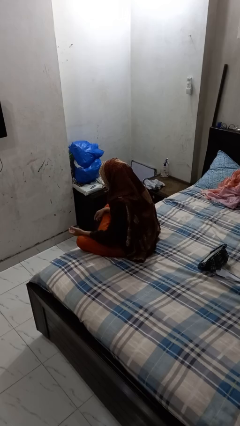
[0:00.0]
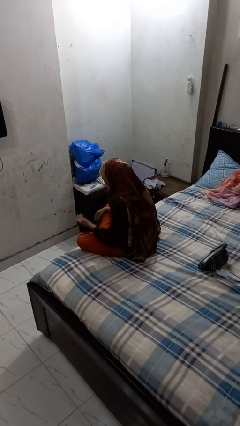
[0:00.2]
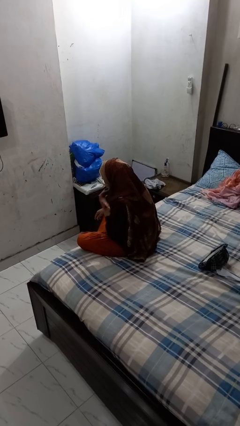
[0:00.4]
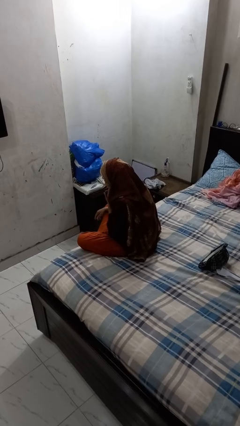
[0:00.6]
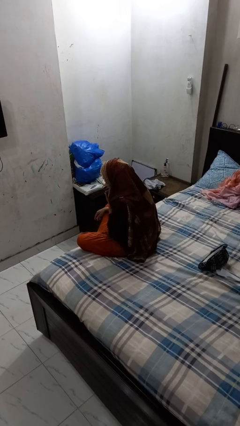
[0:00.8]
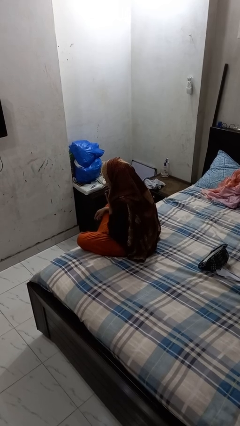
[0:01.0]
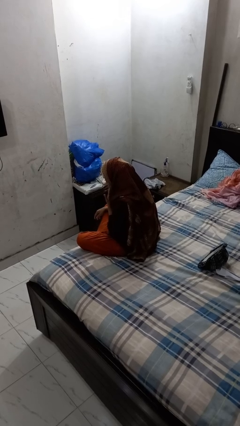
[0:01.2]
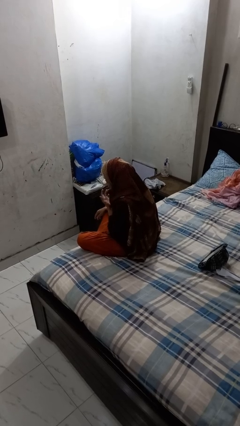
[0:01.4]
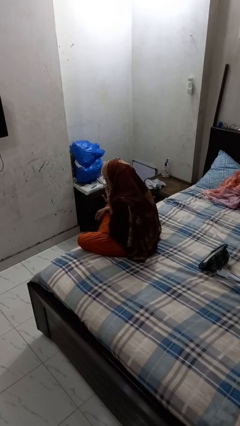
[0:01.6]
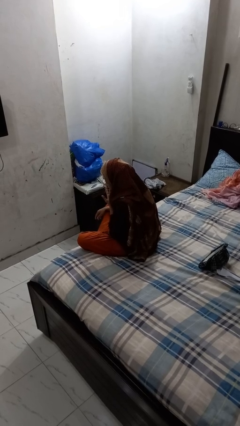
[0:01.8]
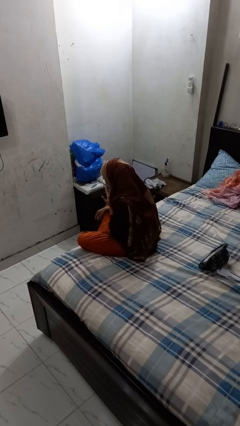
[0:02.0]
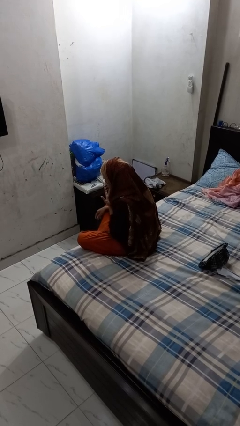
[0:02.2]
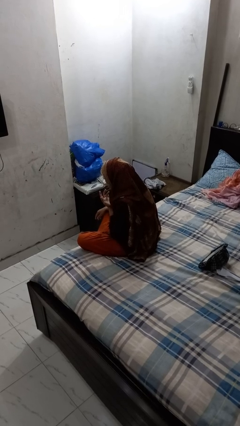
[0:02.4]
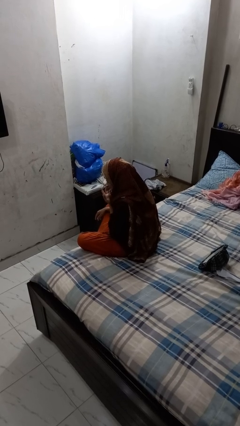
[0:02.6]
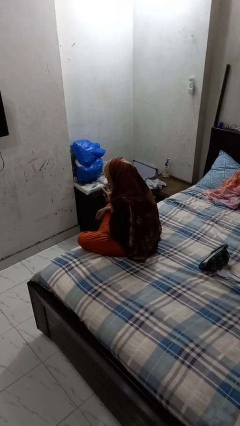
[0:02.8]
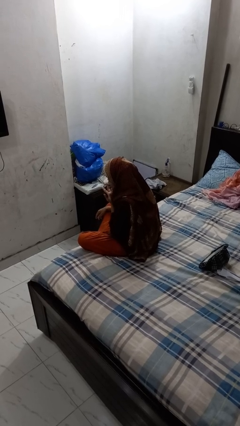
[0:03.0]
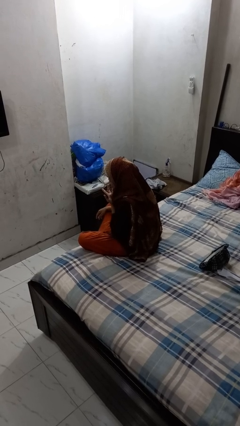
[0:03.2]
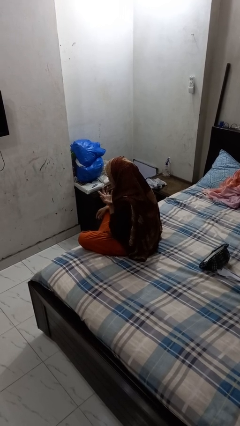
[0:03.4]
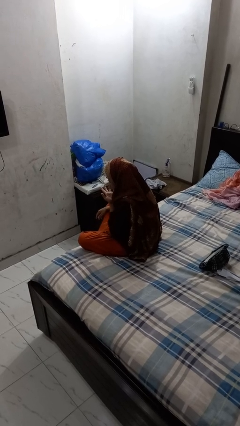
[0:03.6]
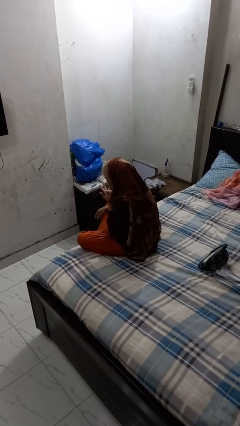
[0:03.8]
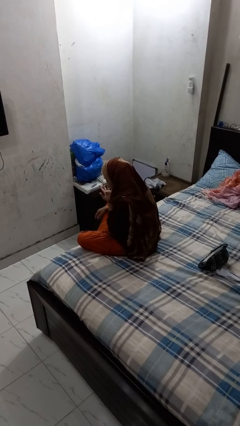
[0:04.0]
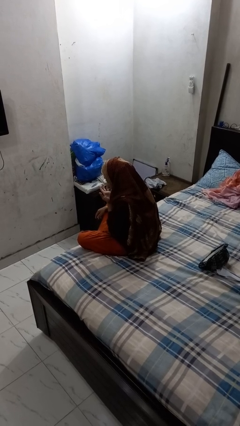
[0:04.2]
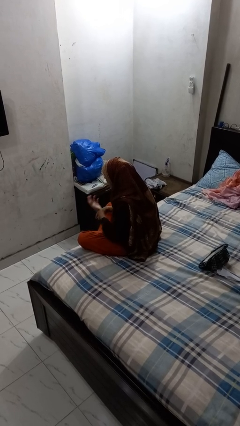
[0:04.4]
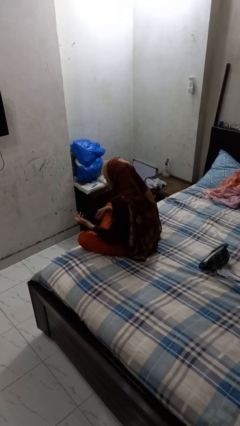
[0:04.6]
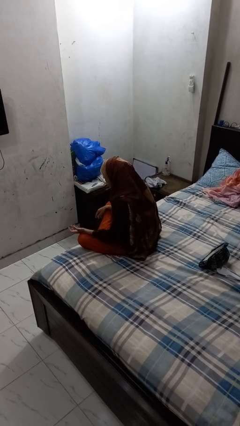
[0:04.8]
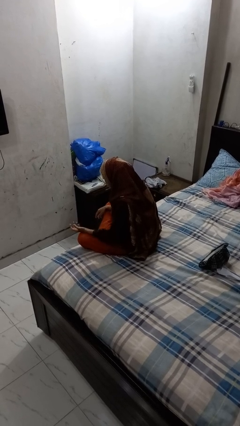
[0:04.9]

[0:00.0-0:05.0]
person licks fingers

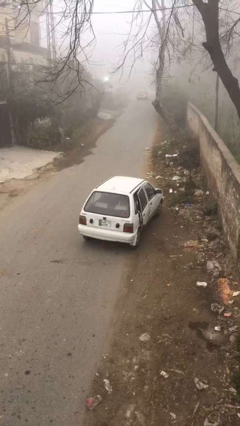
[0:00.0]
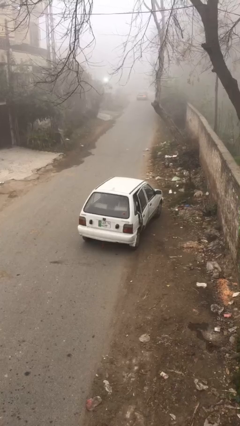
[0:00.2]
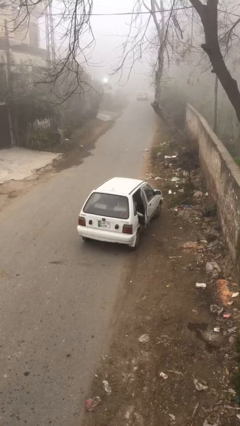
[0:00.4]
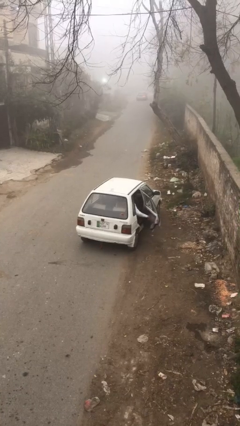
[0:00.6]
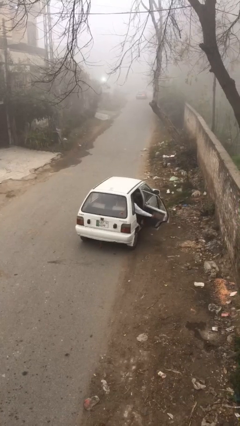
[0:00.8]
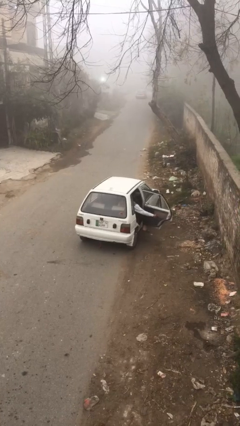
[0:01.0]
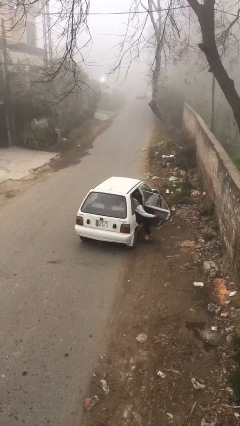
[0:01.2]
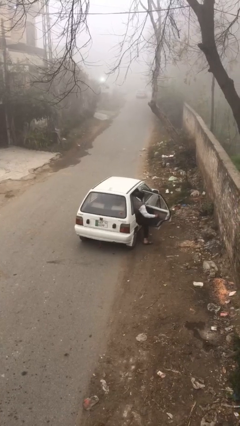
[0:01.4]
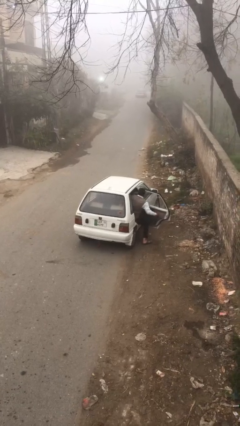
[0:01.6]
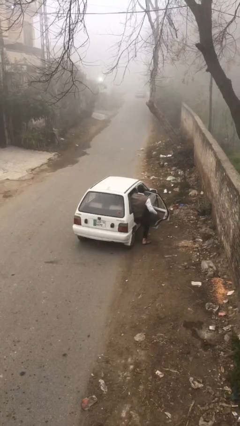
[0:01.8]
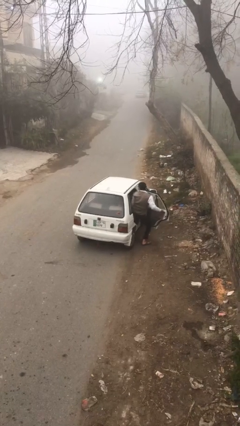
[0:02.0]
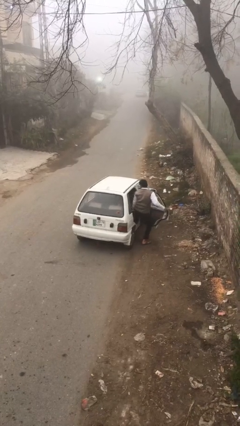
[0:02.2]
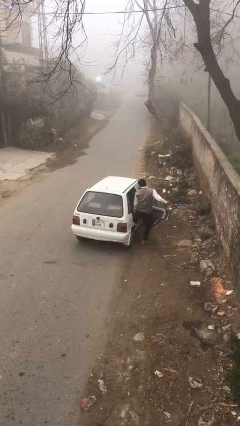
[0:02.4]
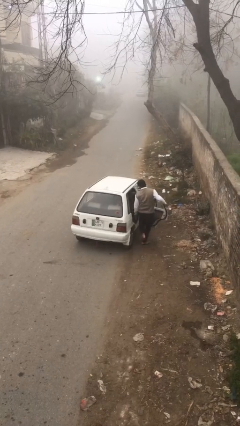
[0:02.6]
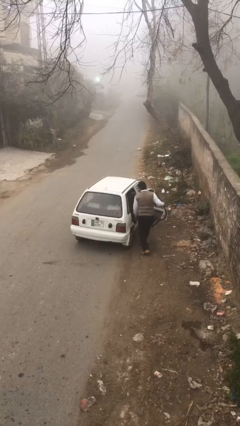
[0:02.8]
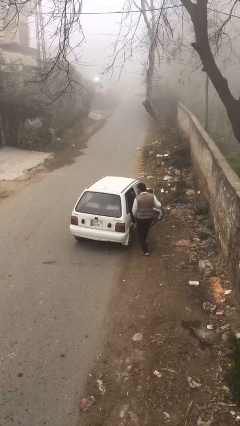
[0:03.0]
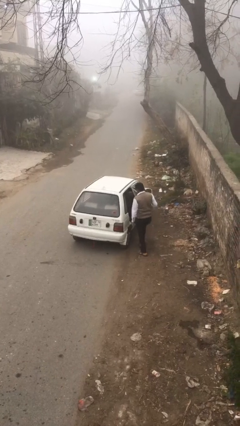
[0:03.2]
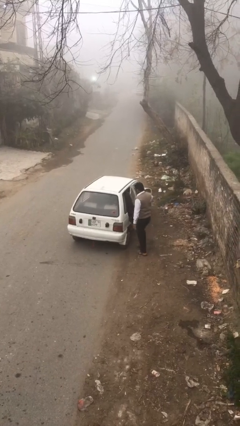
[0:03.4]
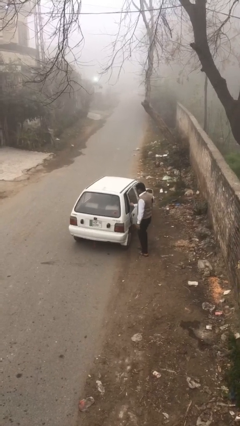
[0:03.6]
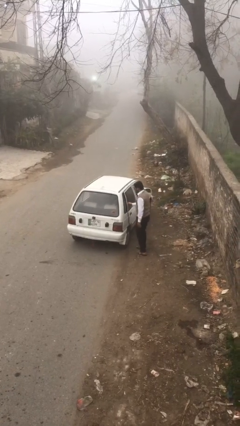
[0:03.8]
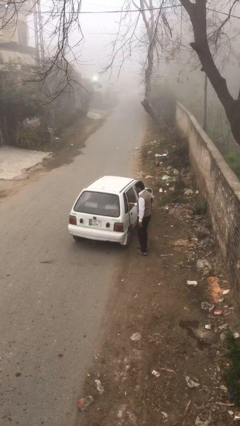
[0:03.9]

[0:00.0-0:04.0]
car drops off person

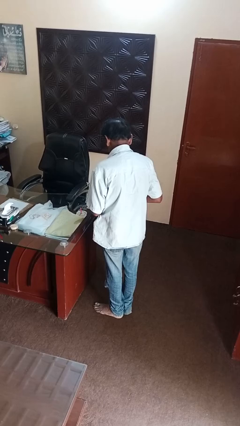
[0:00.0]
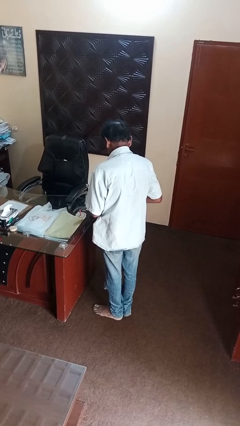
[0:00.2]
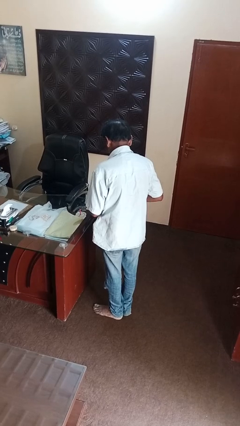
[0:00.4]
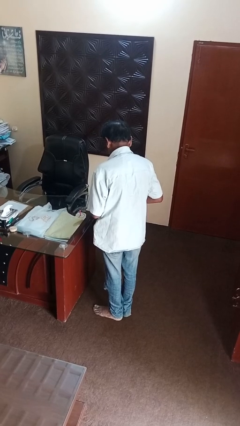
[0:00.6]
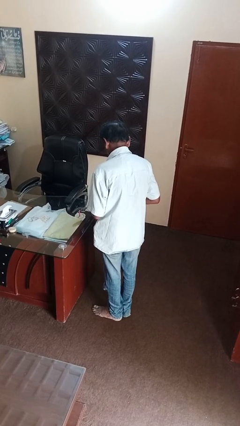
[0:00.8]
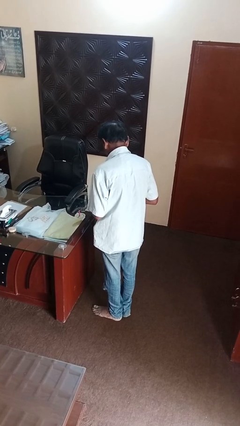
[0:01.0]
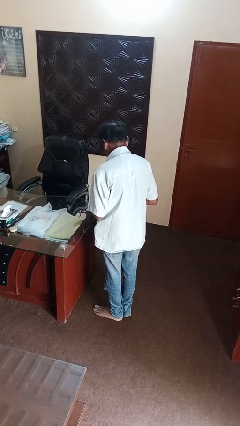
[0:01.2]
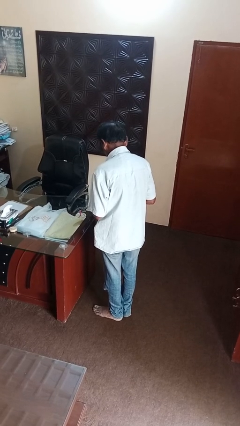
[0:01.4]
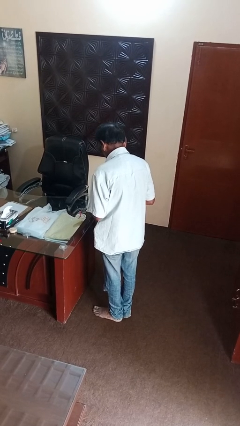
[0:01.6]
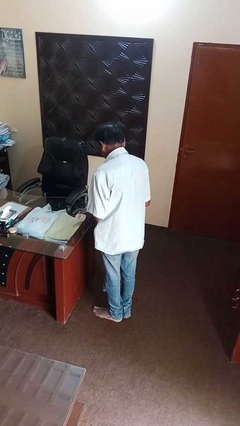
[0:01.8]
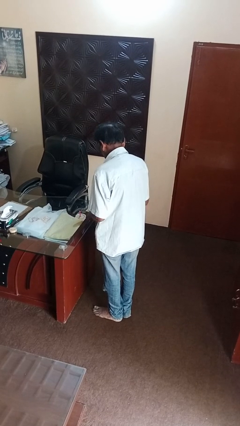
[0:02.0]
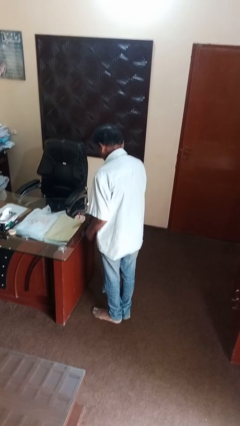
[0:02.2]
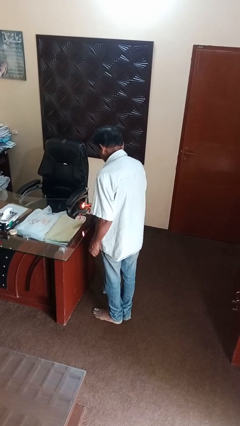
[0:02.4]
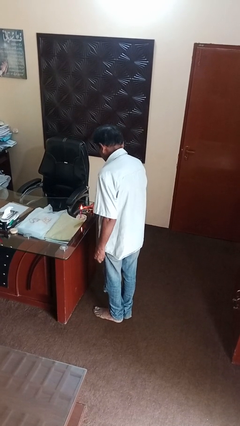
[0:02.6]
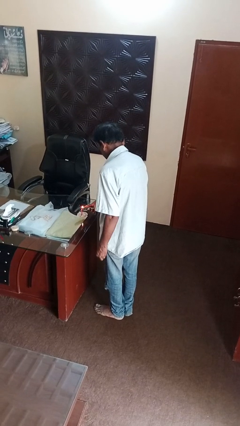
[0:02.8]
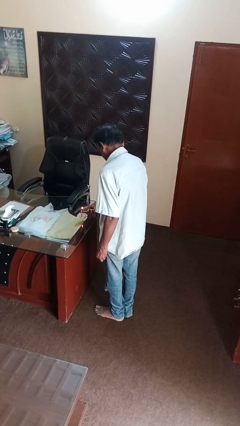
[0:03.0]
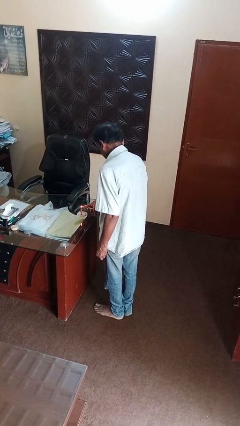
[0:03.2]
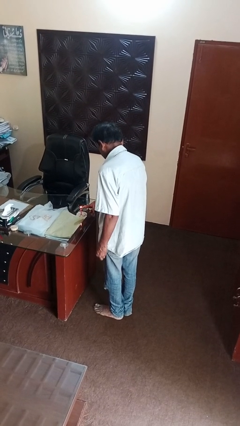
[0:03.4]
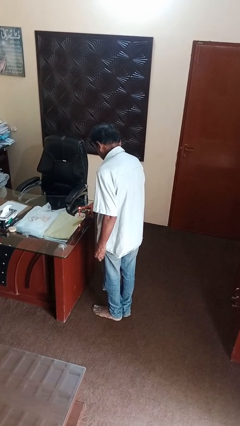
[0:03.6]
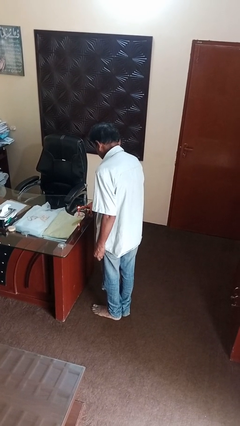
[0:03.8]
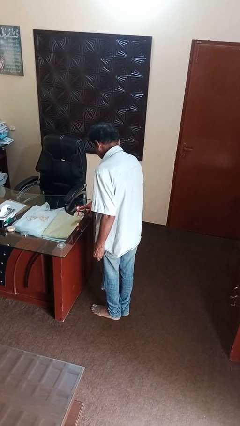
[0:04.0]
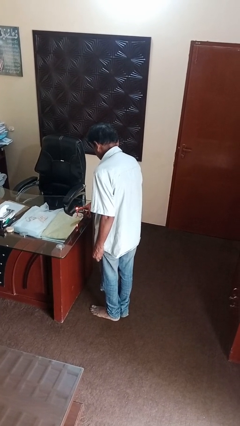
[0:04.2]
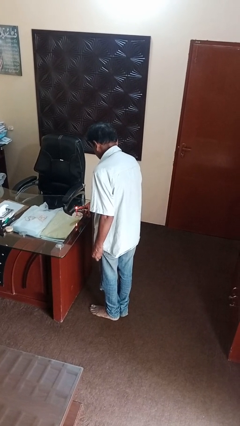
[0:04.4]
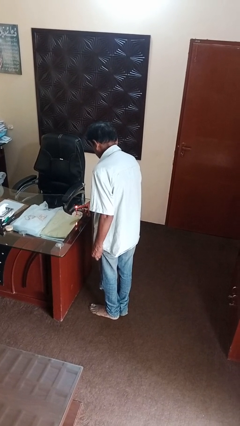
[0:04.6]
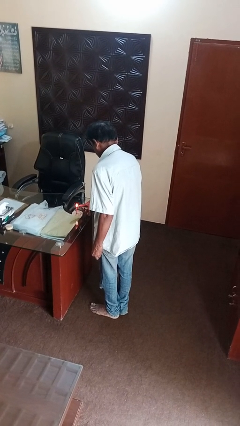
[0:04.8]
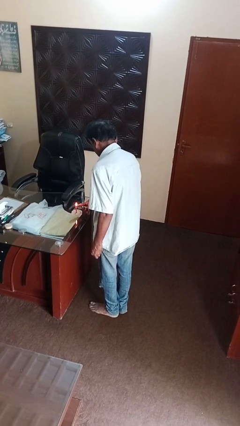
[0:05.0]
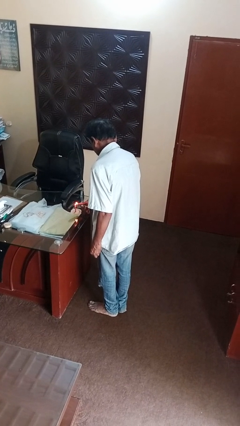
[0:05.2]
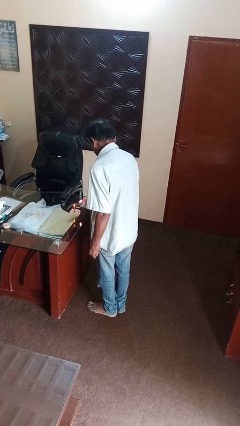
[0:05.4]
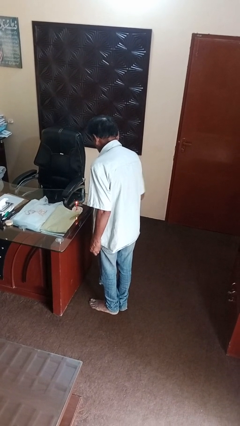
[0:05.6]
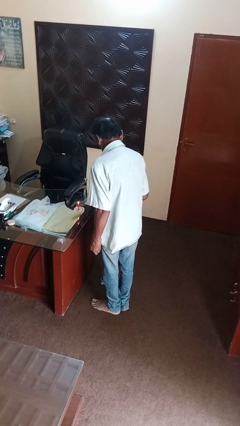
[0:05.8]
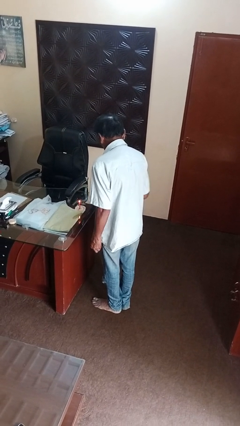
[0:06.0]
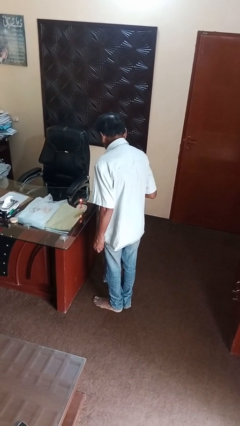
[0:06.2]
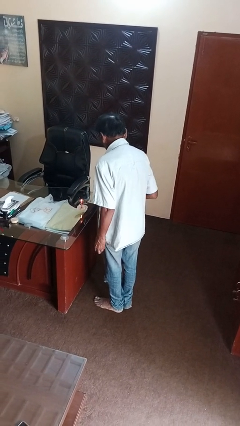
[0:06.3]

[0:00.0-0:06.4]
person lights candle

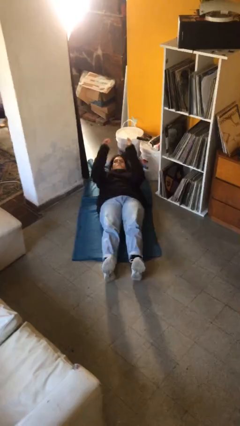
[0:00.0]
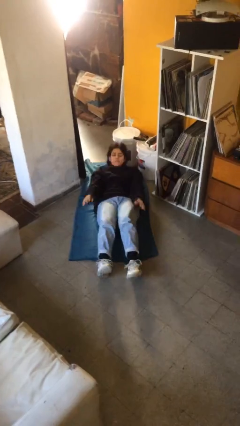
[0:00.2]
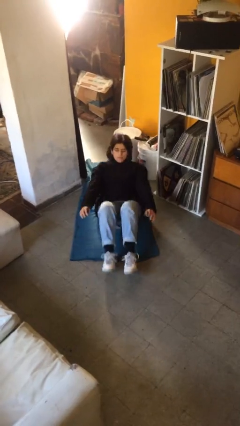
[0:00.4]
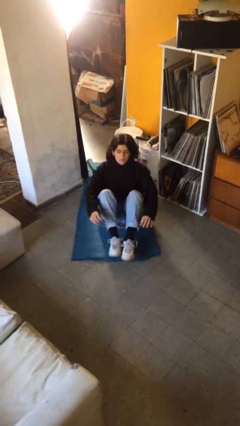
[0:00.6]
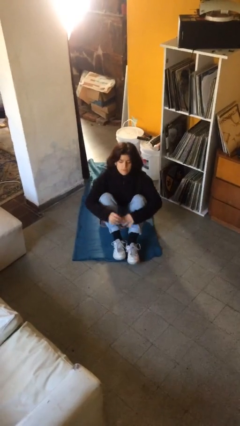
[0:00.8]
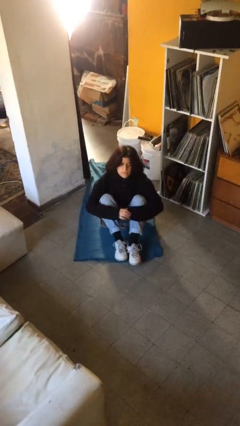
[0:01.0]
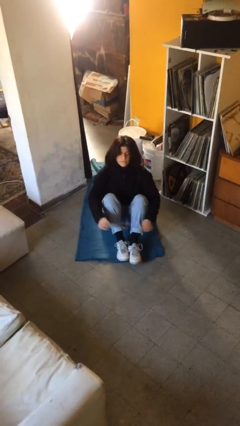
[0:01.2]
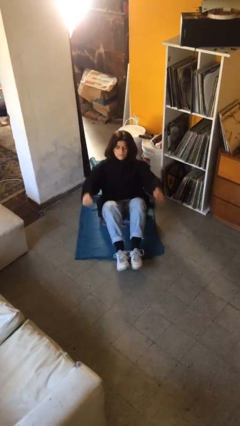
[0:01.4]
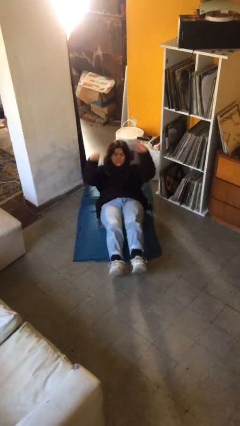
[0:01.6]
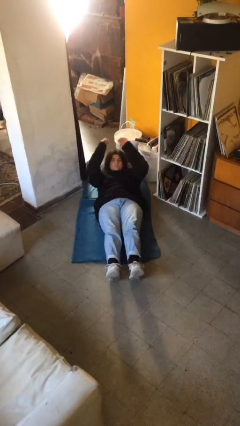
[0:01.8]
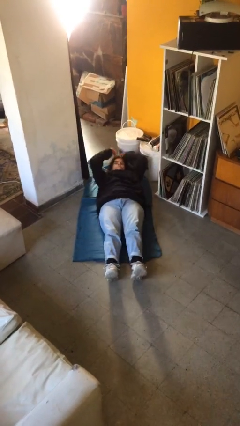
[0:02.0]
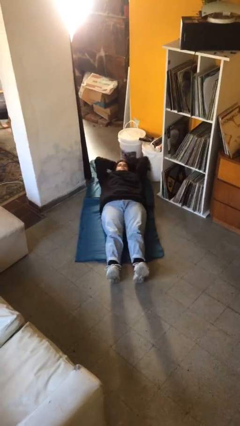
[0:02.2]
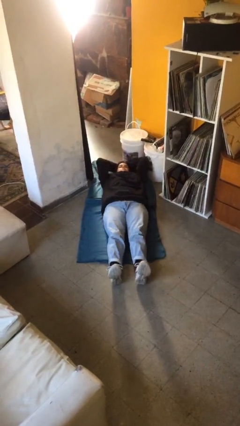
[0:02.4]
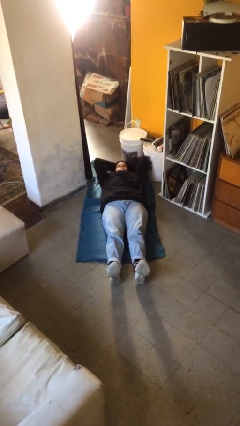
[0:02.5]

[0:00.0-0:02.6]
person exercises with situp
